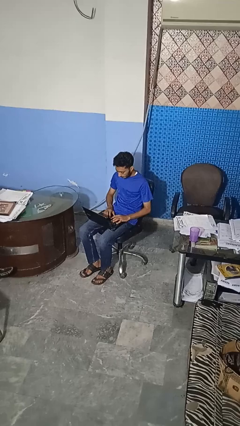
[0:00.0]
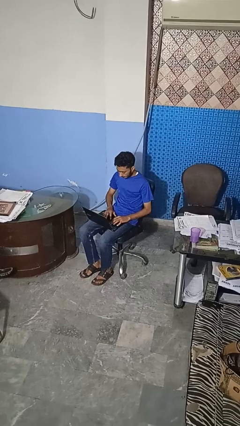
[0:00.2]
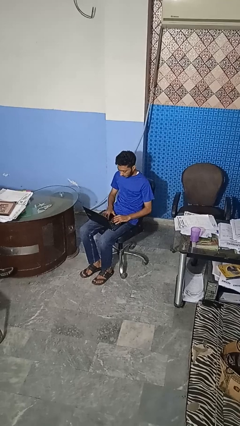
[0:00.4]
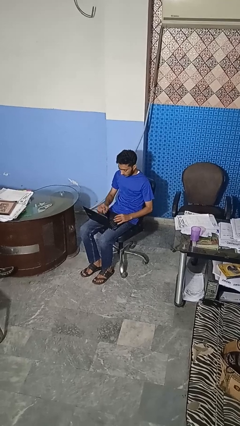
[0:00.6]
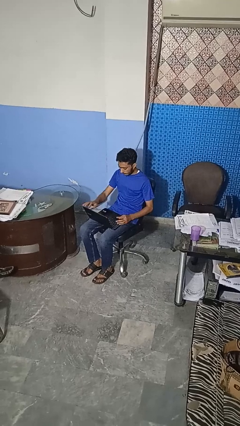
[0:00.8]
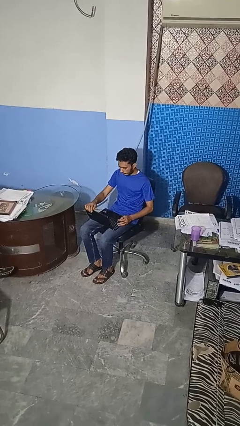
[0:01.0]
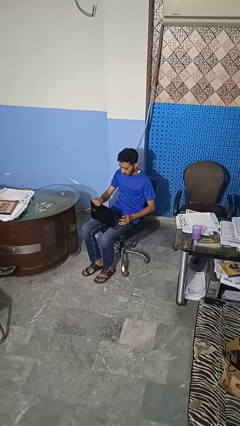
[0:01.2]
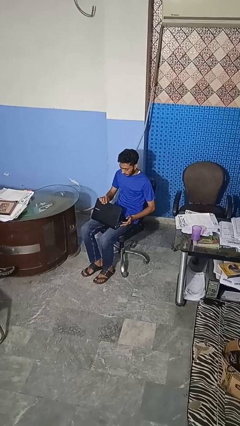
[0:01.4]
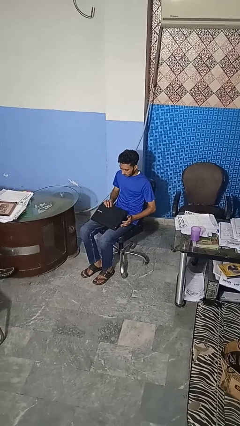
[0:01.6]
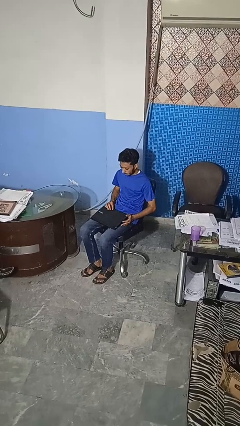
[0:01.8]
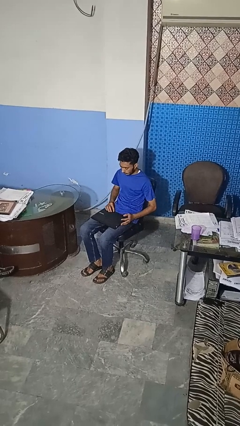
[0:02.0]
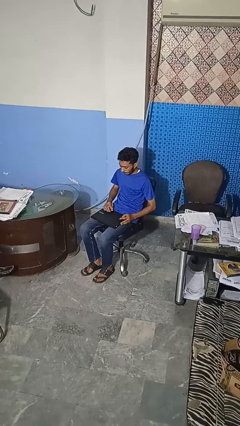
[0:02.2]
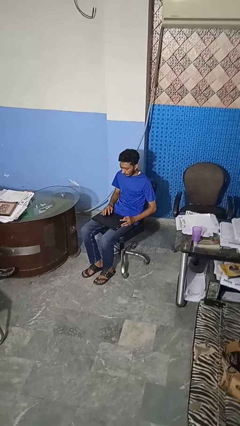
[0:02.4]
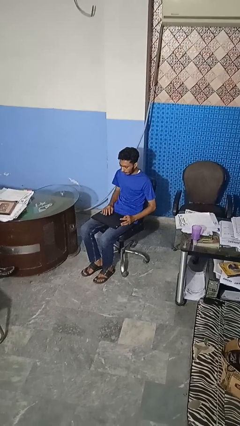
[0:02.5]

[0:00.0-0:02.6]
person closes laptop

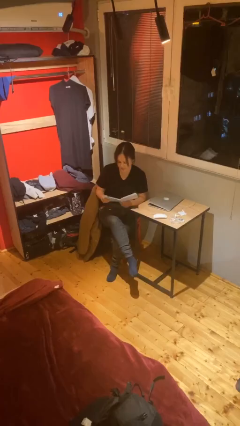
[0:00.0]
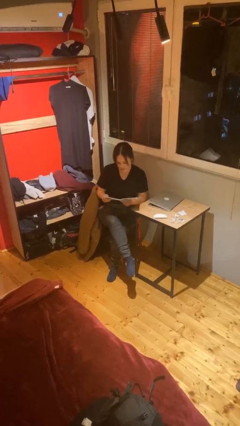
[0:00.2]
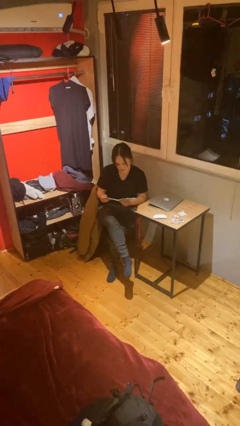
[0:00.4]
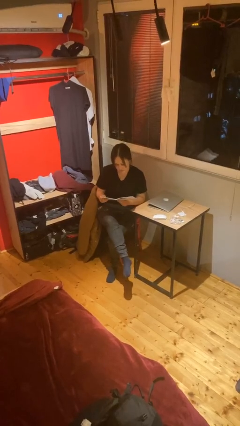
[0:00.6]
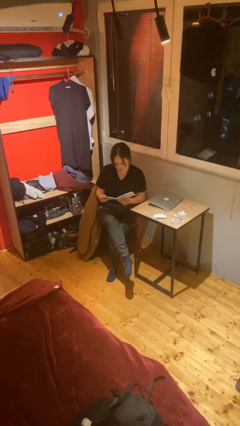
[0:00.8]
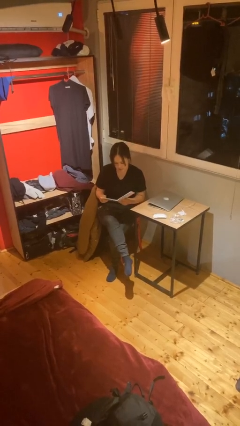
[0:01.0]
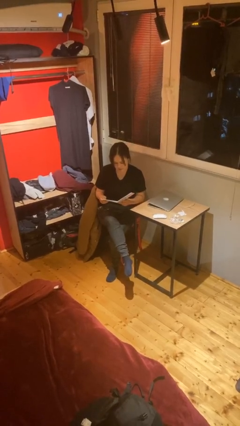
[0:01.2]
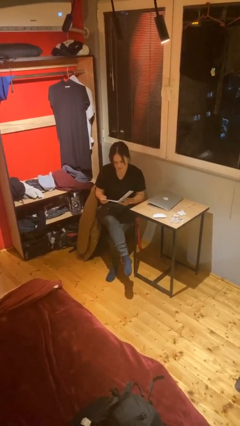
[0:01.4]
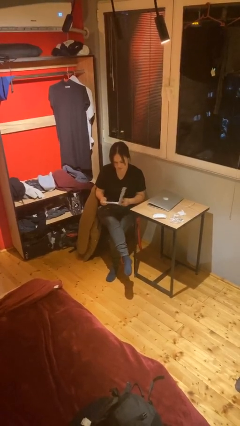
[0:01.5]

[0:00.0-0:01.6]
person reads document

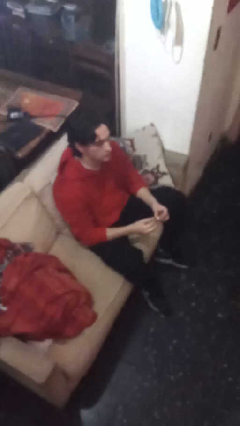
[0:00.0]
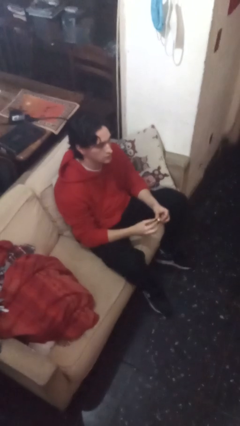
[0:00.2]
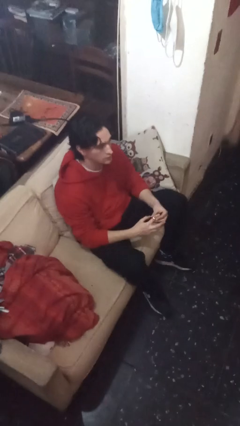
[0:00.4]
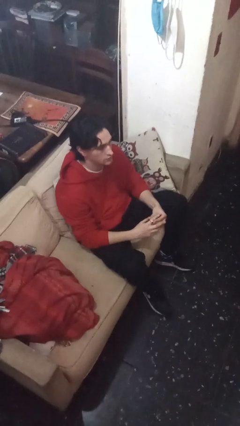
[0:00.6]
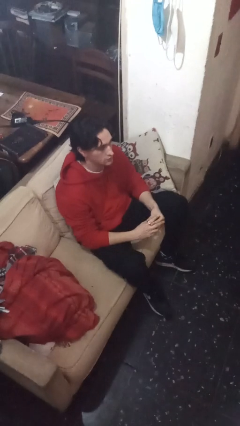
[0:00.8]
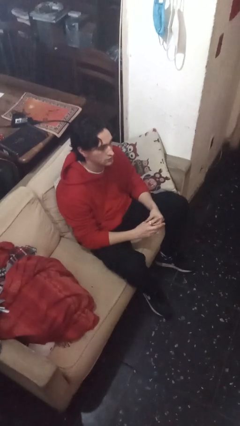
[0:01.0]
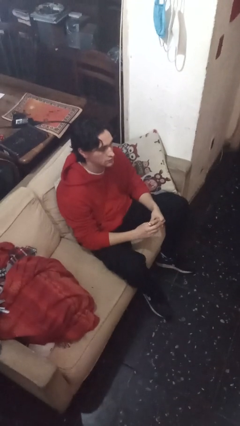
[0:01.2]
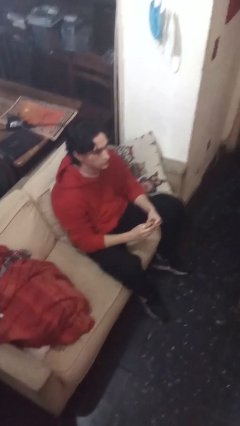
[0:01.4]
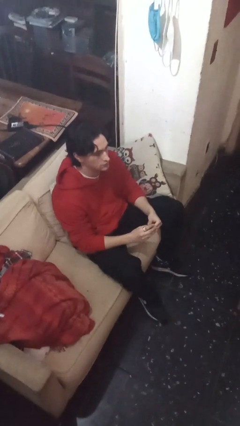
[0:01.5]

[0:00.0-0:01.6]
person puts on ring

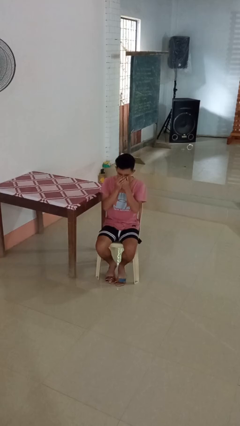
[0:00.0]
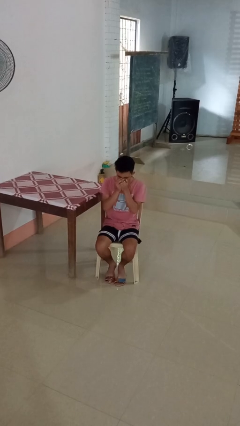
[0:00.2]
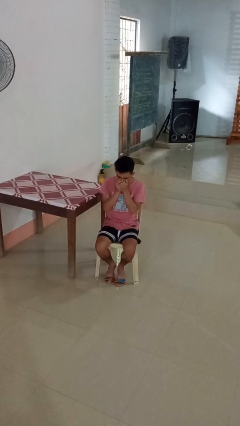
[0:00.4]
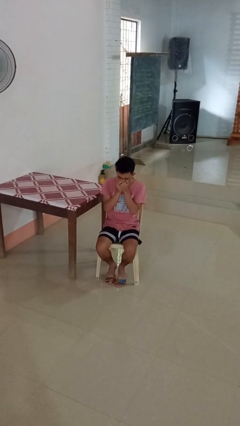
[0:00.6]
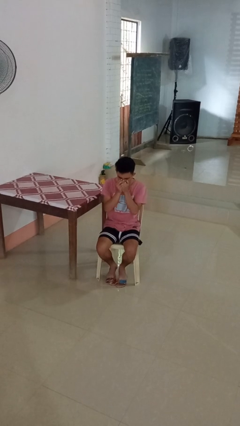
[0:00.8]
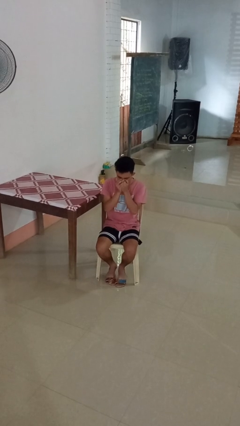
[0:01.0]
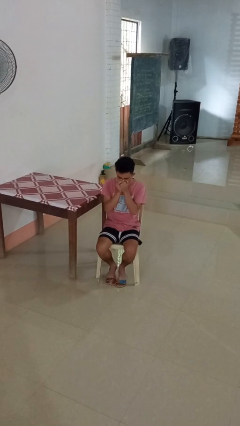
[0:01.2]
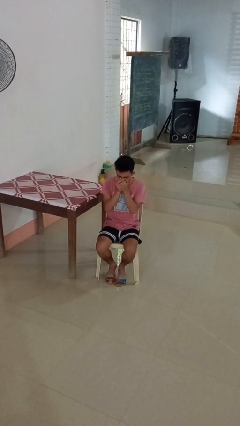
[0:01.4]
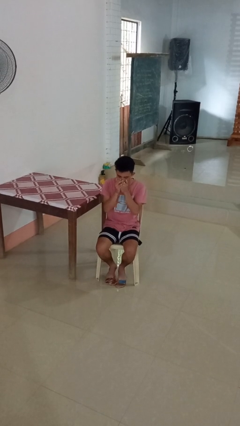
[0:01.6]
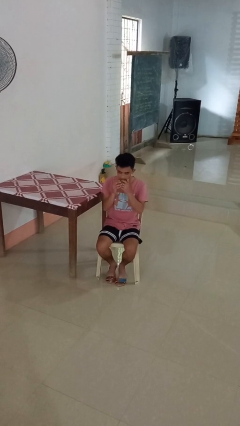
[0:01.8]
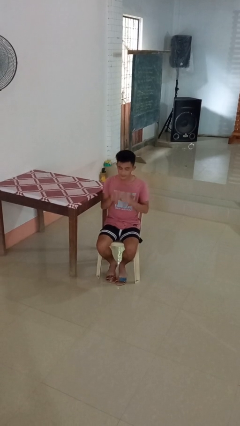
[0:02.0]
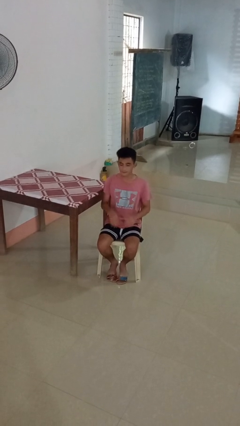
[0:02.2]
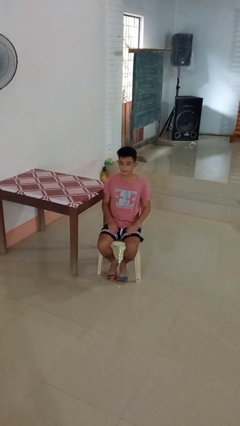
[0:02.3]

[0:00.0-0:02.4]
person sneezes into hand

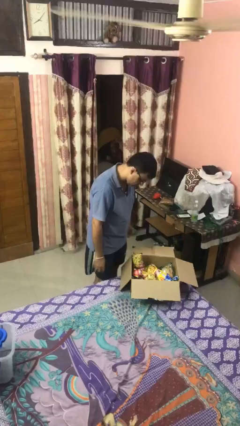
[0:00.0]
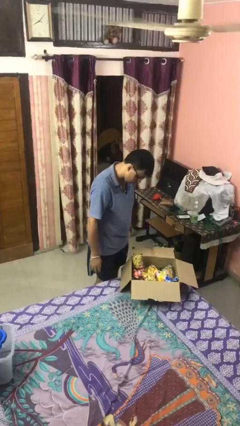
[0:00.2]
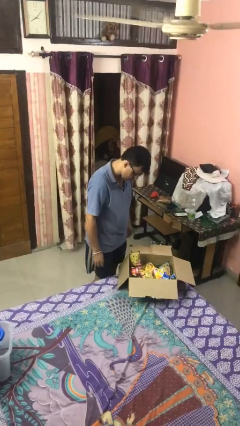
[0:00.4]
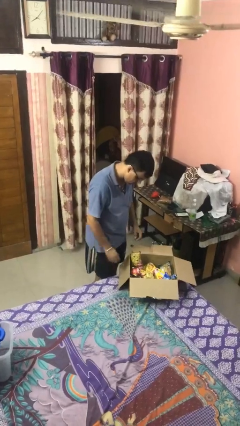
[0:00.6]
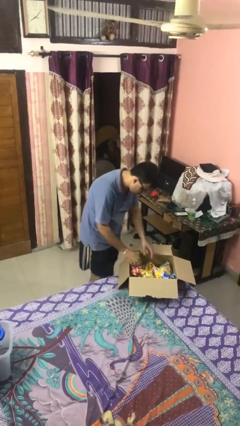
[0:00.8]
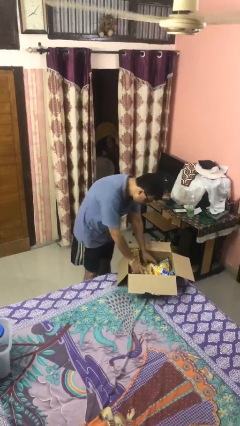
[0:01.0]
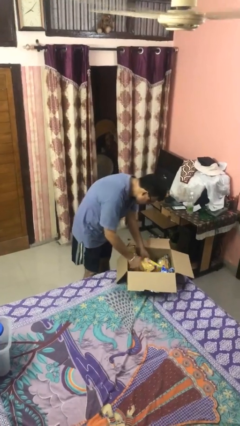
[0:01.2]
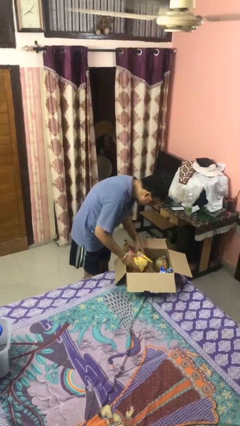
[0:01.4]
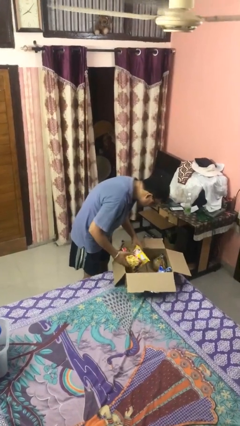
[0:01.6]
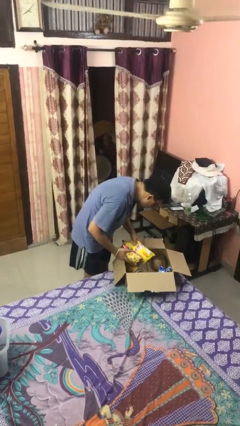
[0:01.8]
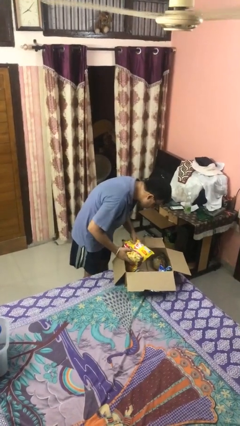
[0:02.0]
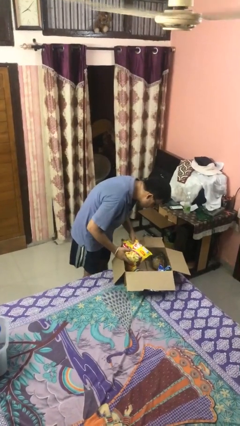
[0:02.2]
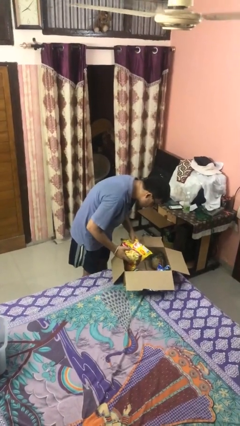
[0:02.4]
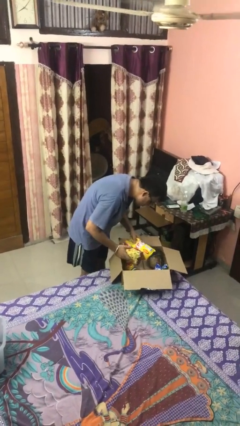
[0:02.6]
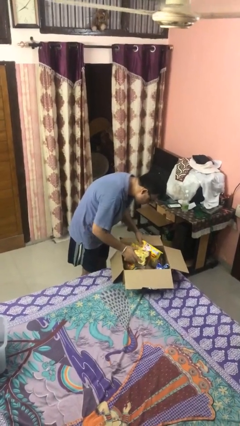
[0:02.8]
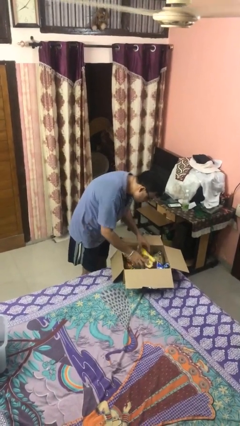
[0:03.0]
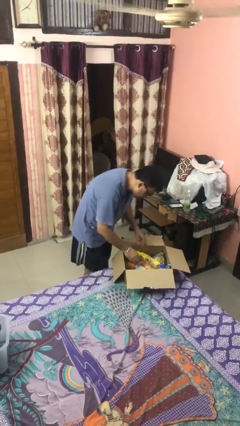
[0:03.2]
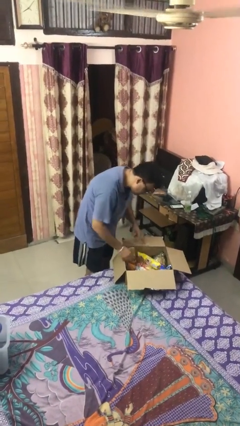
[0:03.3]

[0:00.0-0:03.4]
person searches in box

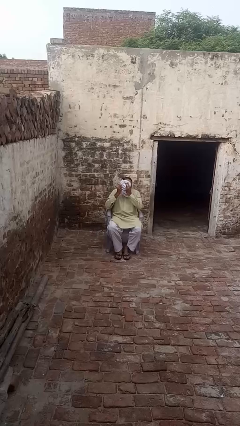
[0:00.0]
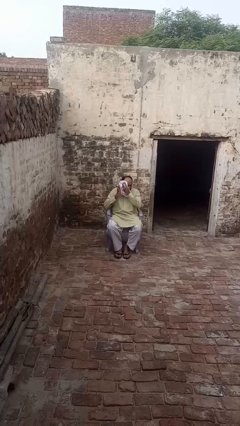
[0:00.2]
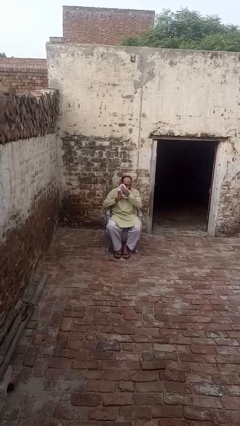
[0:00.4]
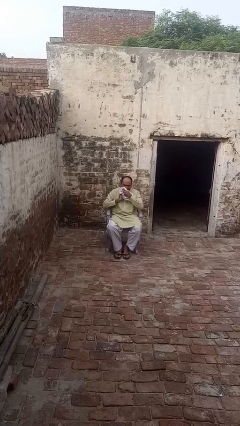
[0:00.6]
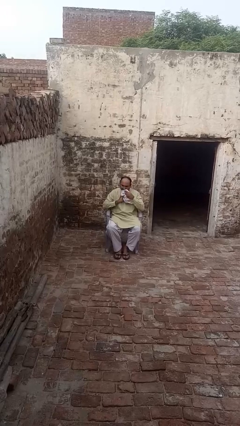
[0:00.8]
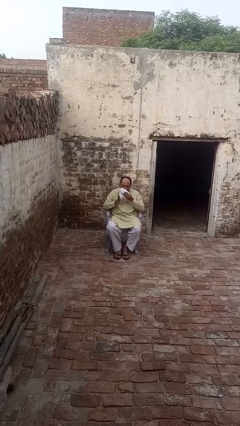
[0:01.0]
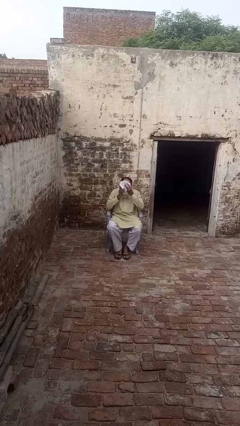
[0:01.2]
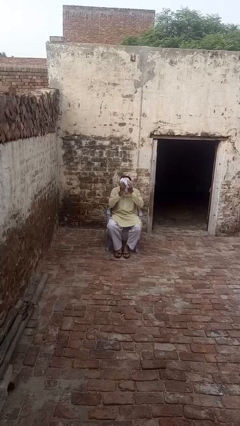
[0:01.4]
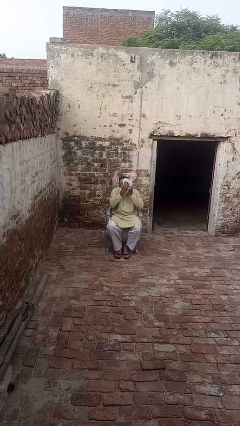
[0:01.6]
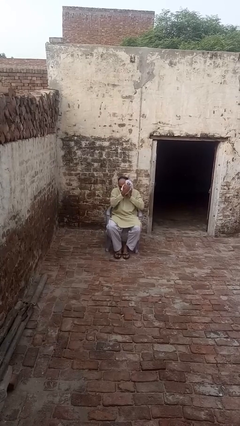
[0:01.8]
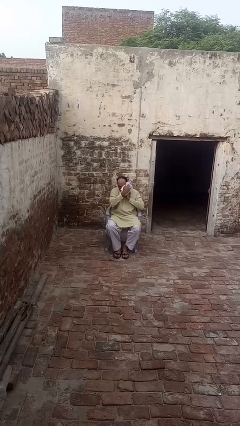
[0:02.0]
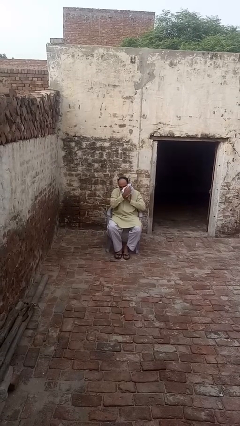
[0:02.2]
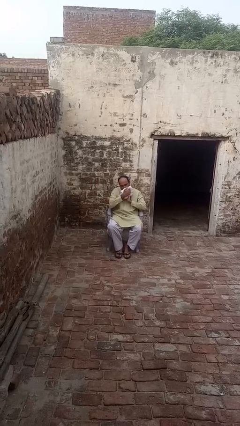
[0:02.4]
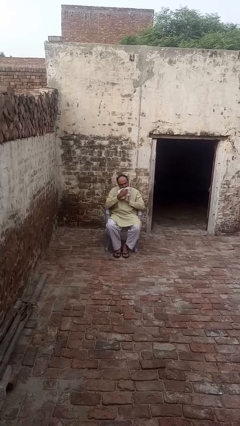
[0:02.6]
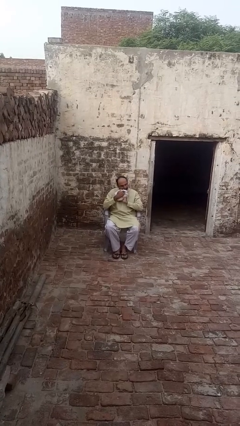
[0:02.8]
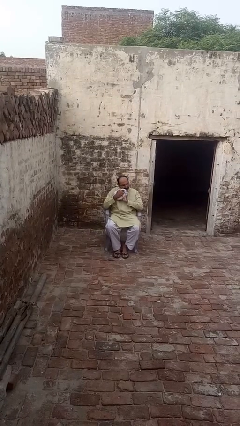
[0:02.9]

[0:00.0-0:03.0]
person wipes mouth with napkin

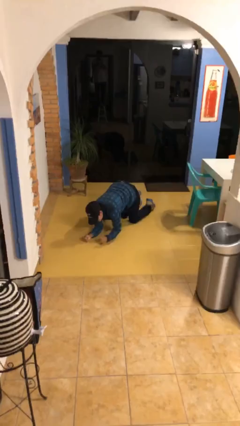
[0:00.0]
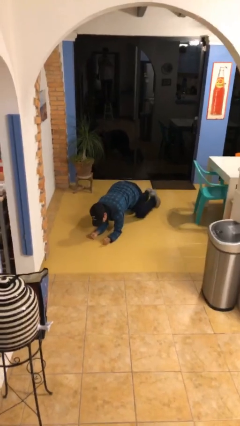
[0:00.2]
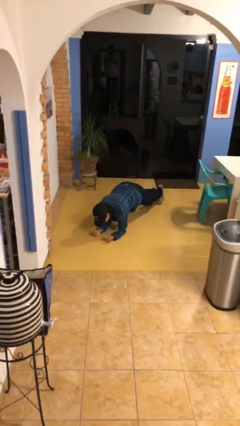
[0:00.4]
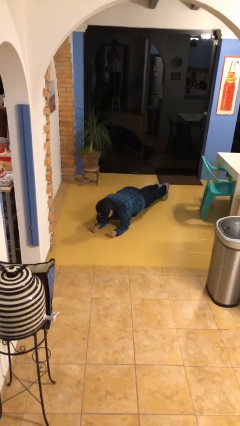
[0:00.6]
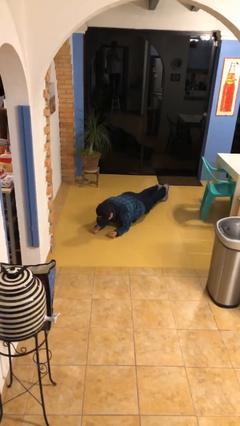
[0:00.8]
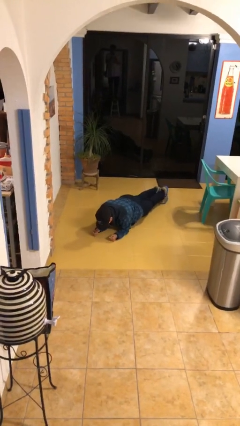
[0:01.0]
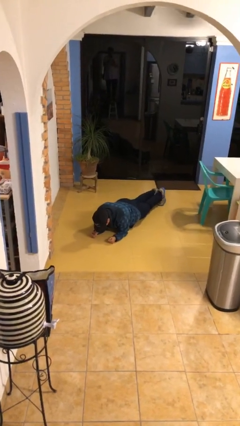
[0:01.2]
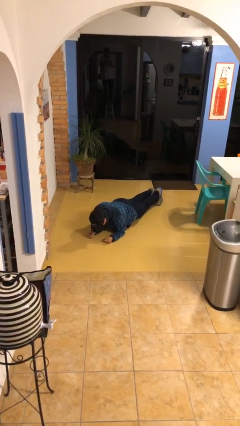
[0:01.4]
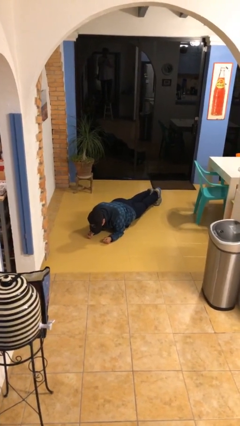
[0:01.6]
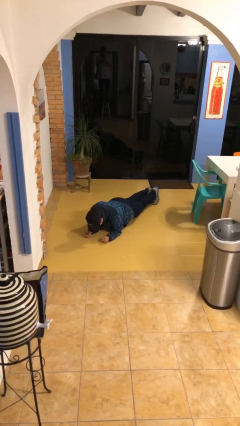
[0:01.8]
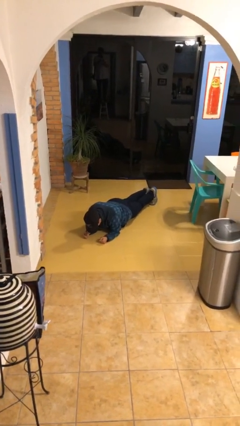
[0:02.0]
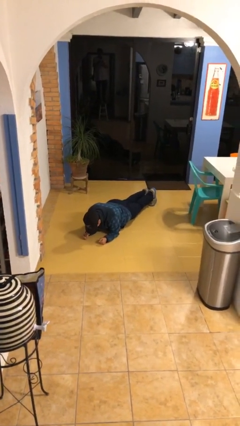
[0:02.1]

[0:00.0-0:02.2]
person exercises with plank
